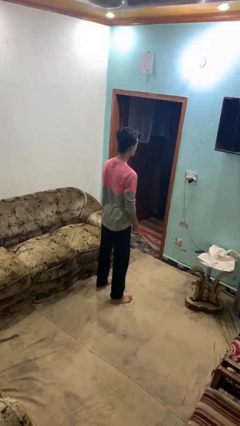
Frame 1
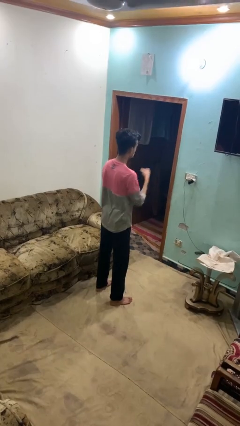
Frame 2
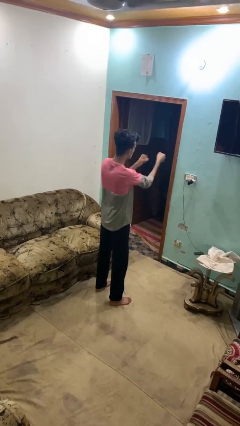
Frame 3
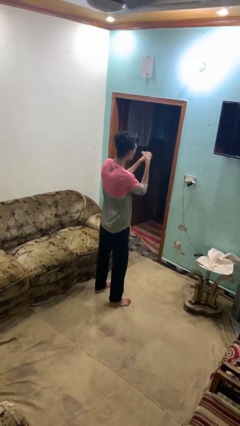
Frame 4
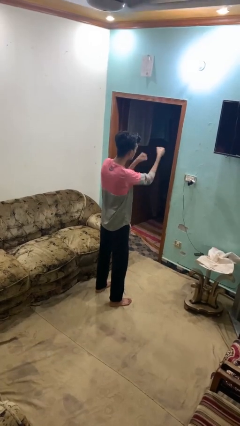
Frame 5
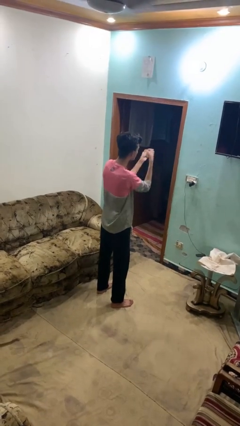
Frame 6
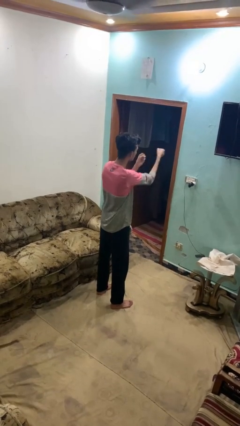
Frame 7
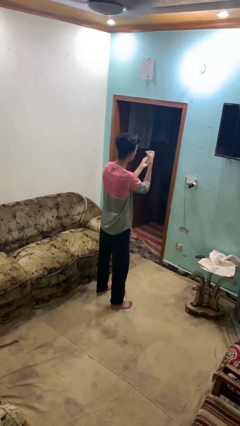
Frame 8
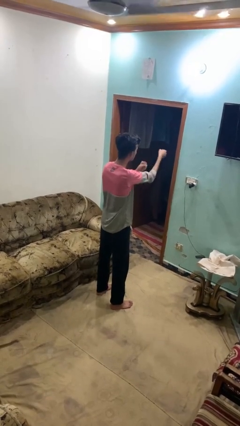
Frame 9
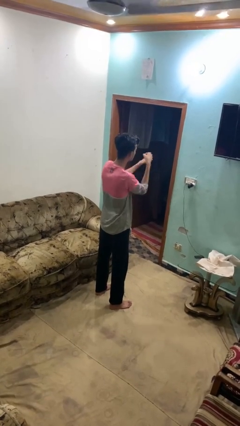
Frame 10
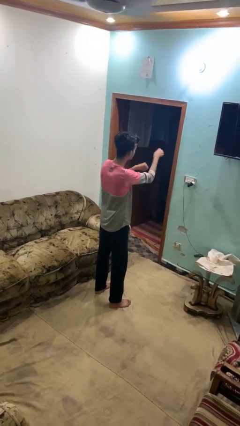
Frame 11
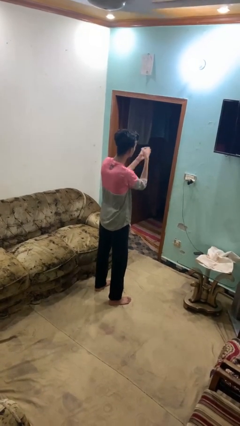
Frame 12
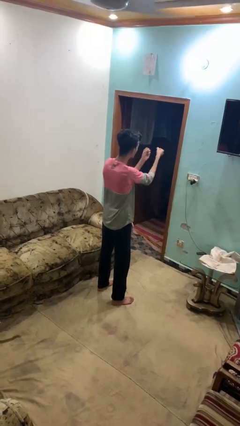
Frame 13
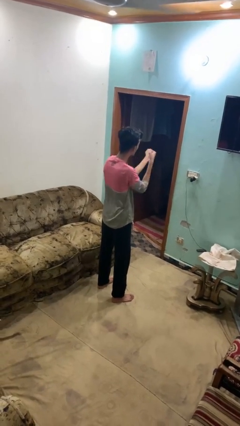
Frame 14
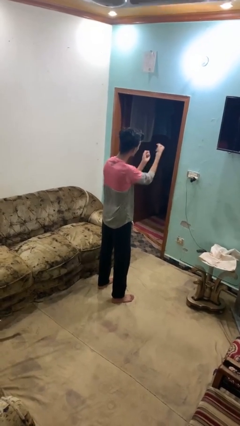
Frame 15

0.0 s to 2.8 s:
person punches

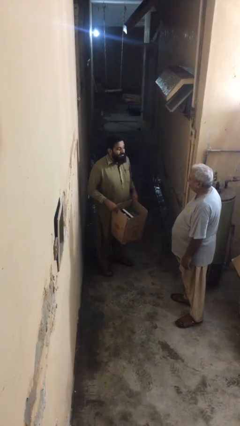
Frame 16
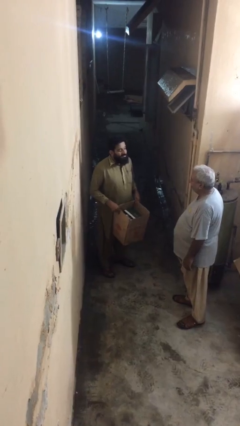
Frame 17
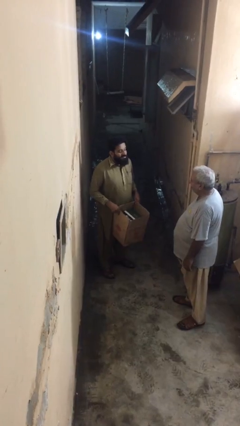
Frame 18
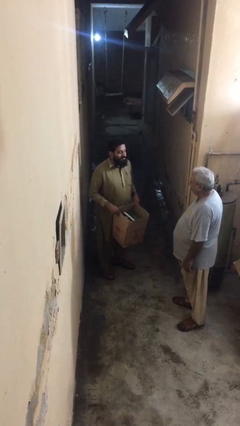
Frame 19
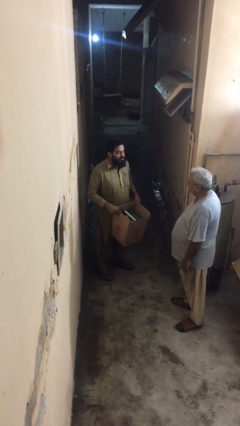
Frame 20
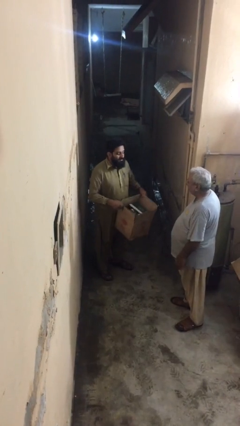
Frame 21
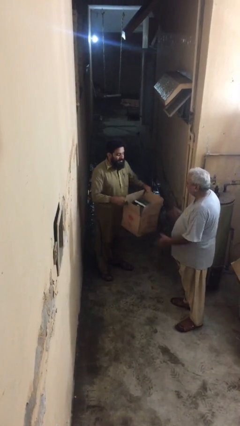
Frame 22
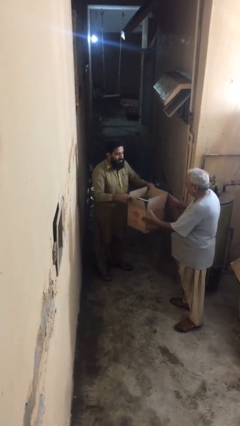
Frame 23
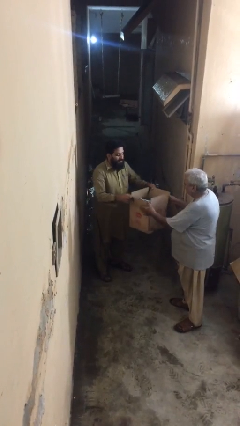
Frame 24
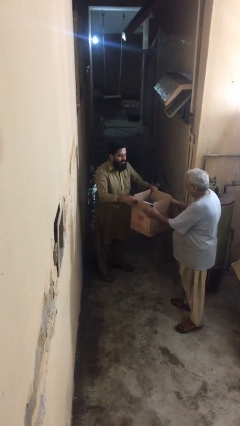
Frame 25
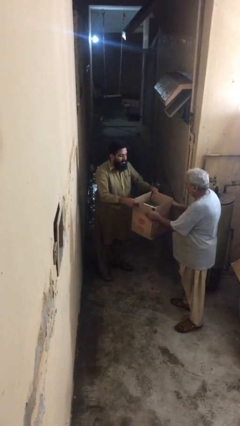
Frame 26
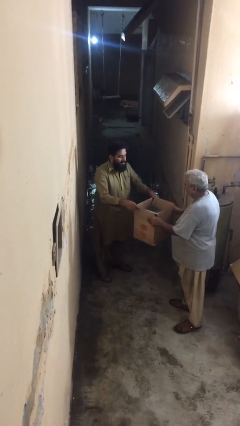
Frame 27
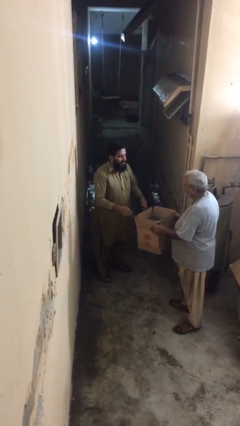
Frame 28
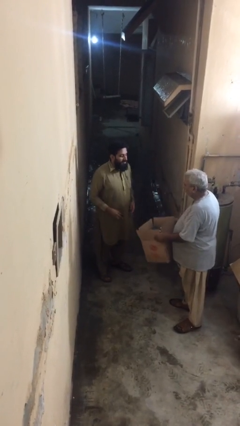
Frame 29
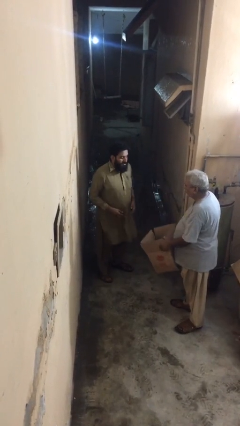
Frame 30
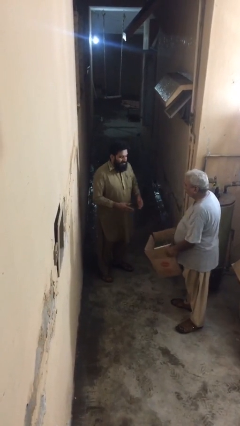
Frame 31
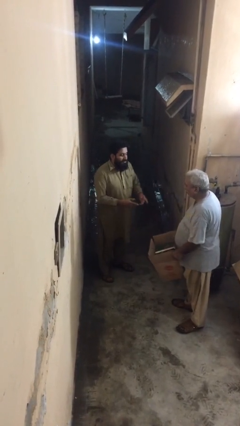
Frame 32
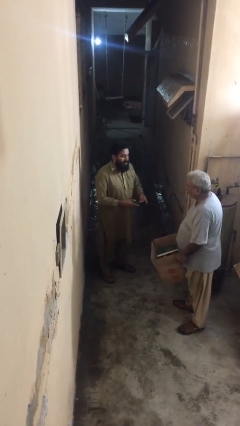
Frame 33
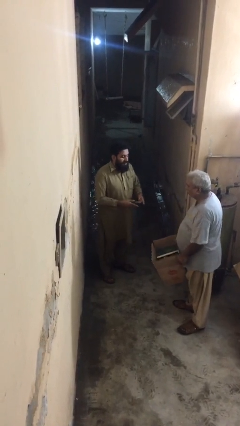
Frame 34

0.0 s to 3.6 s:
person transfers object to person

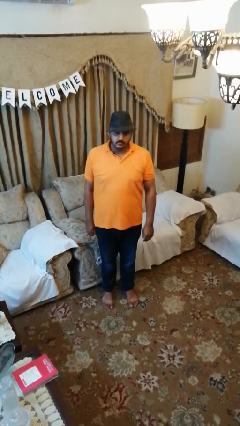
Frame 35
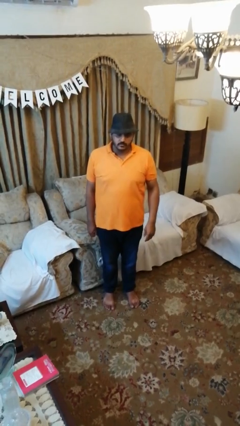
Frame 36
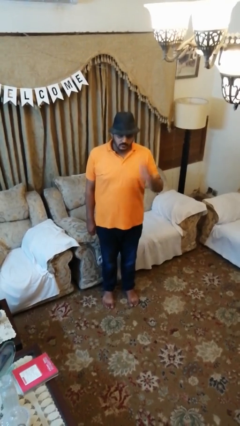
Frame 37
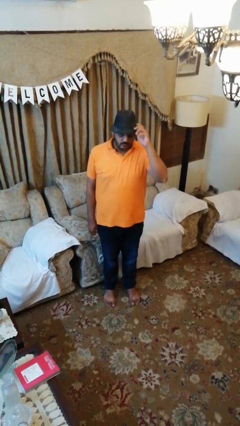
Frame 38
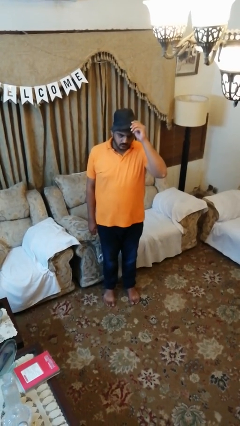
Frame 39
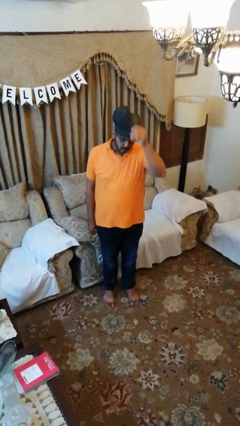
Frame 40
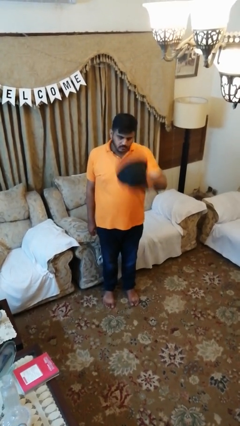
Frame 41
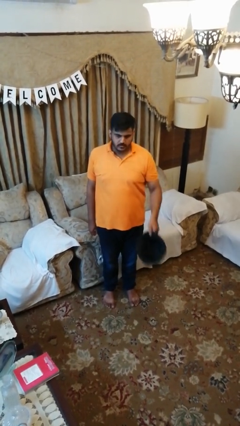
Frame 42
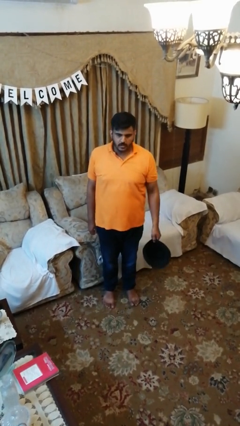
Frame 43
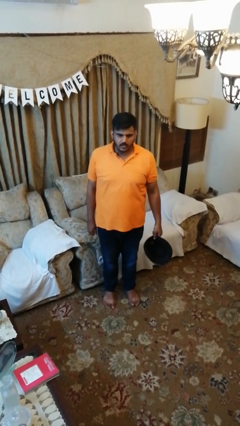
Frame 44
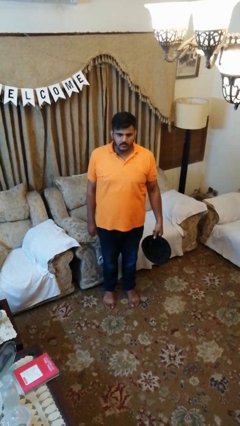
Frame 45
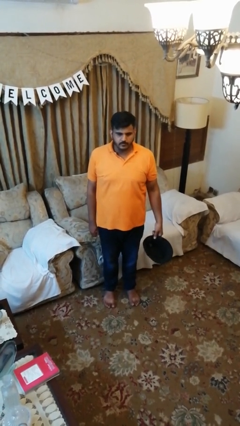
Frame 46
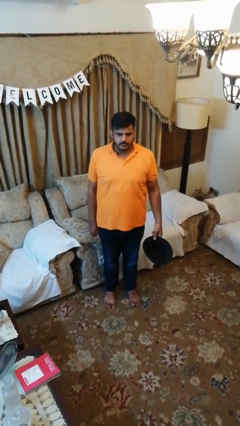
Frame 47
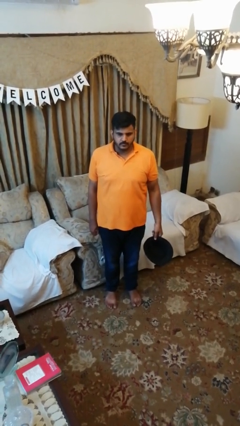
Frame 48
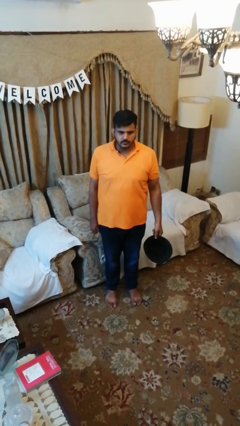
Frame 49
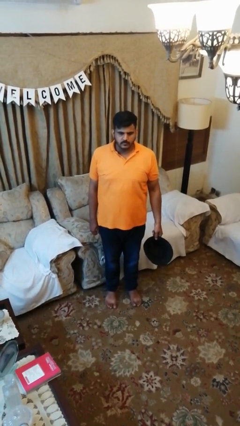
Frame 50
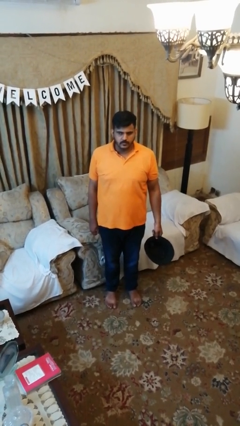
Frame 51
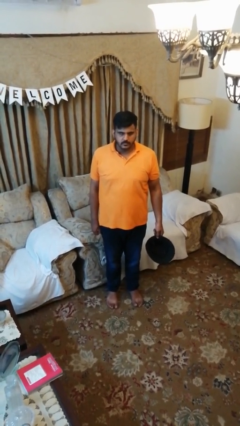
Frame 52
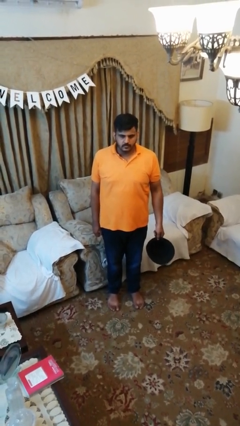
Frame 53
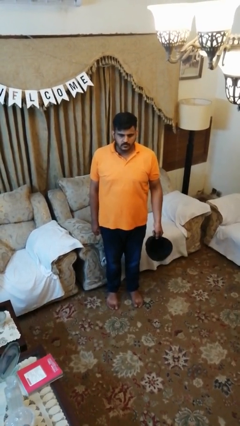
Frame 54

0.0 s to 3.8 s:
person takes off hat

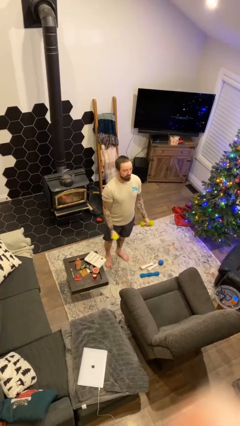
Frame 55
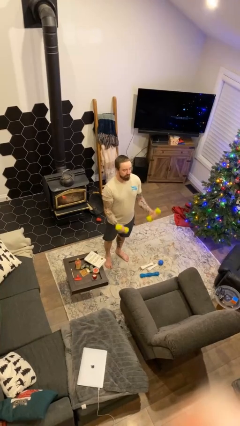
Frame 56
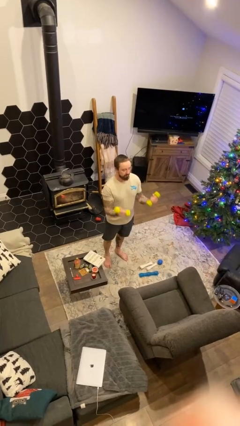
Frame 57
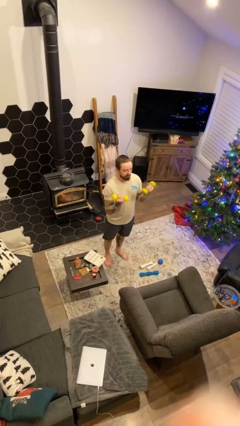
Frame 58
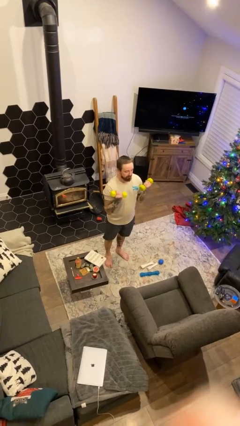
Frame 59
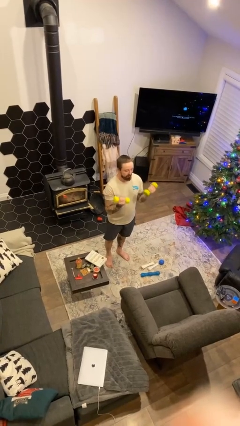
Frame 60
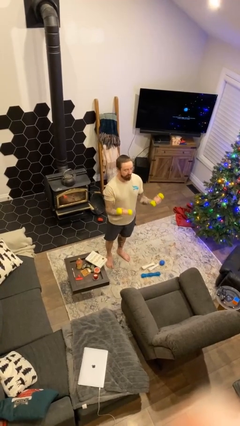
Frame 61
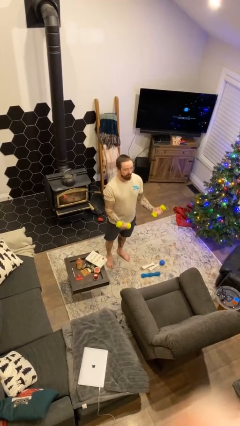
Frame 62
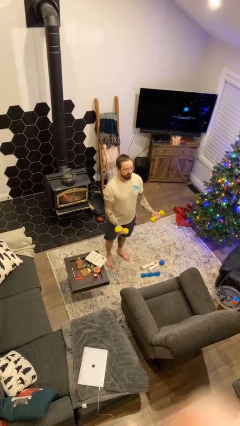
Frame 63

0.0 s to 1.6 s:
person lifts dumbbells

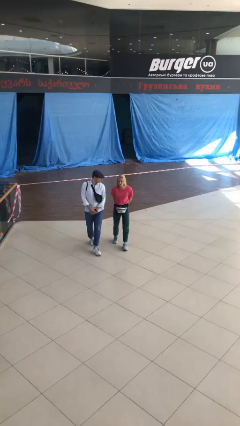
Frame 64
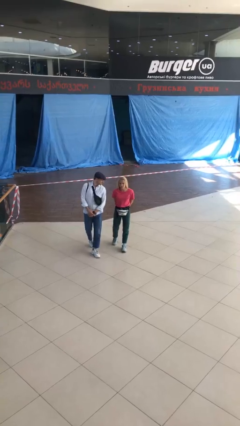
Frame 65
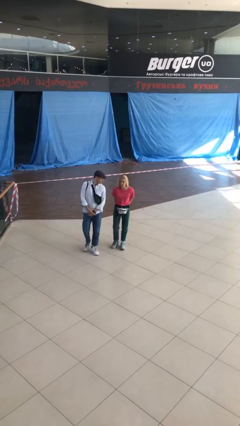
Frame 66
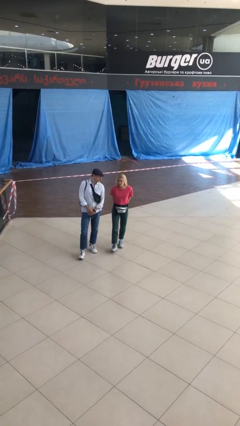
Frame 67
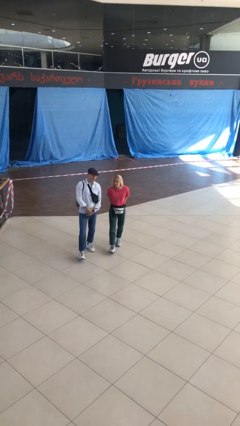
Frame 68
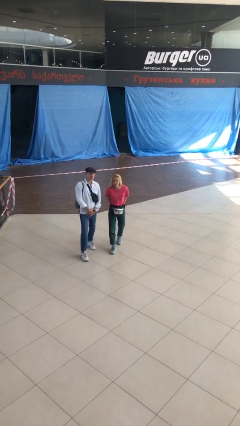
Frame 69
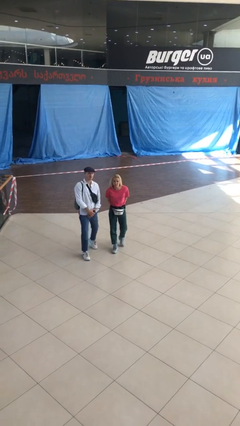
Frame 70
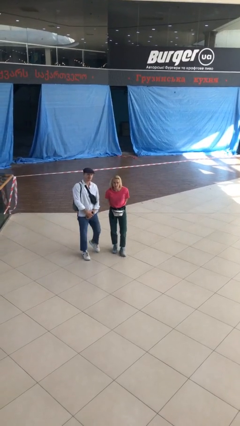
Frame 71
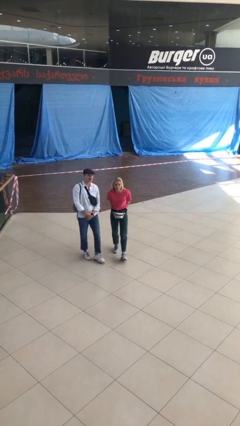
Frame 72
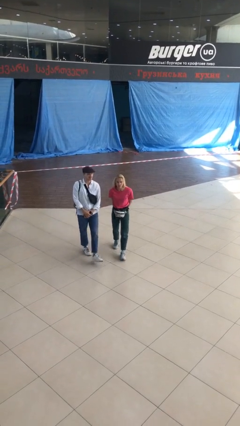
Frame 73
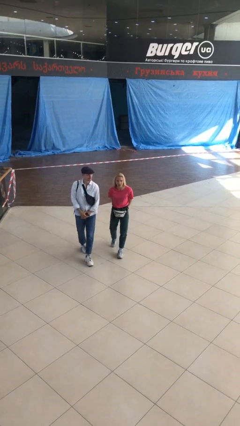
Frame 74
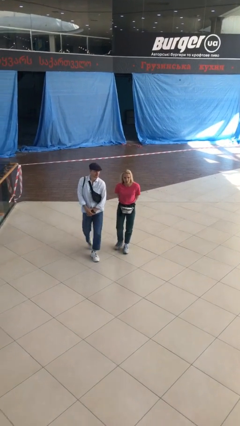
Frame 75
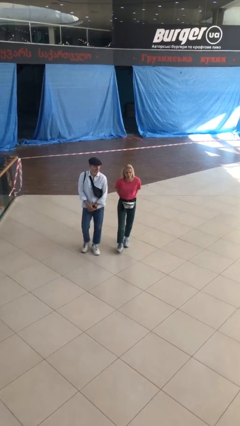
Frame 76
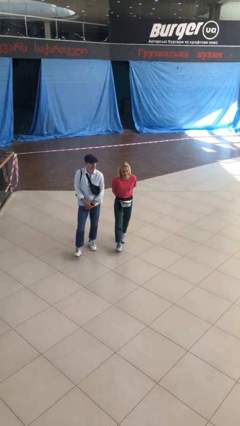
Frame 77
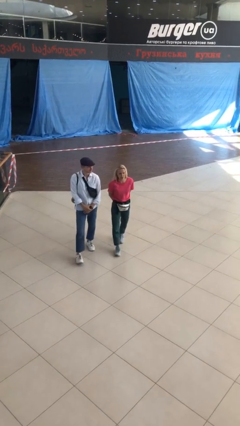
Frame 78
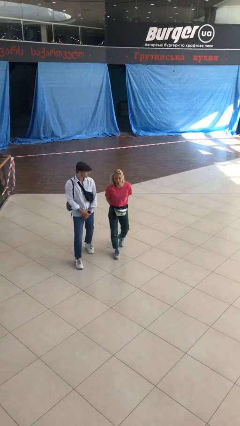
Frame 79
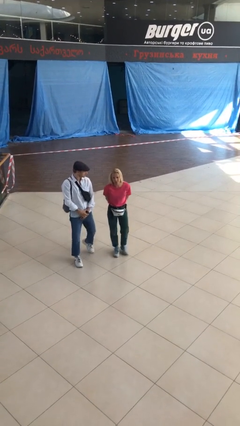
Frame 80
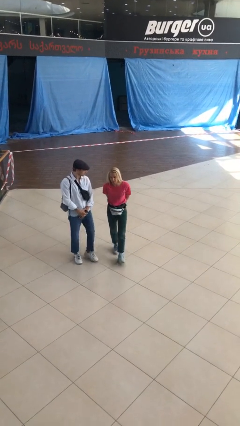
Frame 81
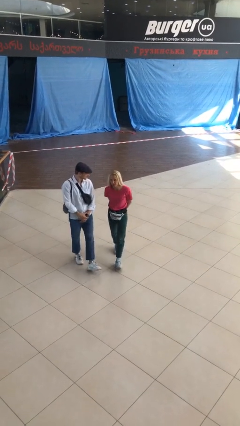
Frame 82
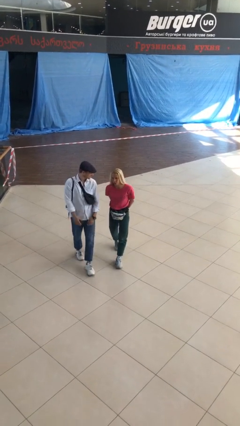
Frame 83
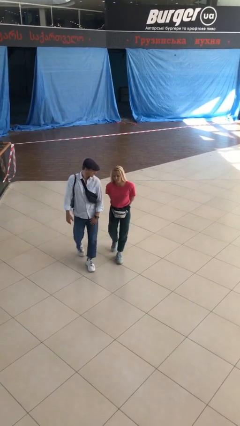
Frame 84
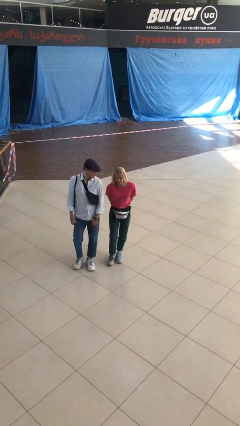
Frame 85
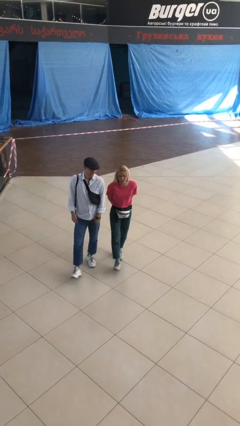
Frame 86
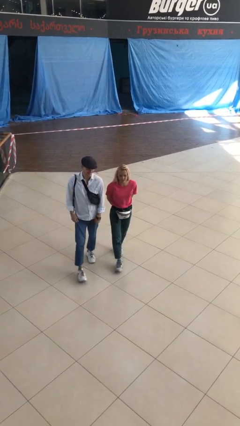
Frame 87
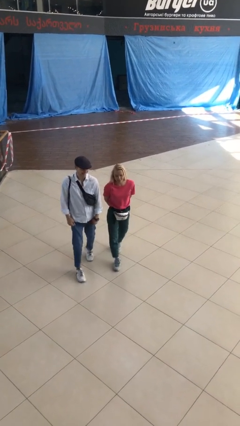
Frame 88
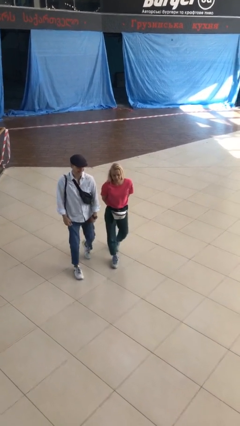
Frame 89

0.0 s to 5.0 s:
person talks to person

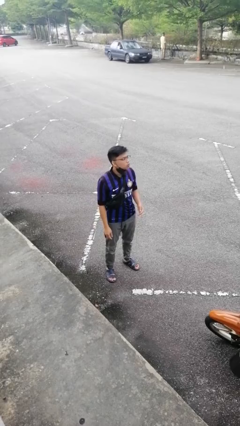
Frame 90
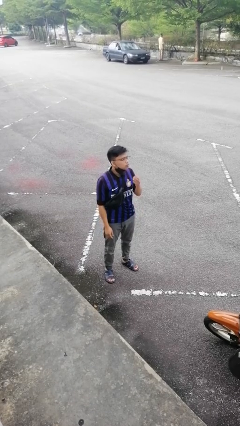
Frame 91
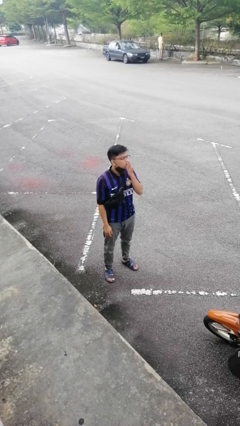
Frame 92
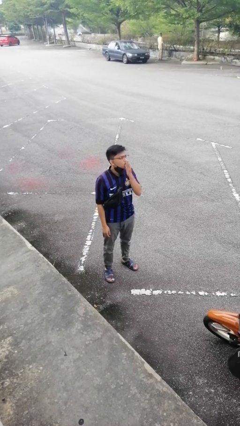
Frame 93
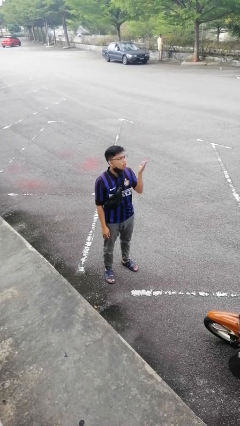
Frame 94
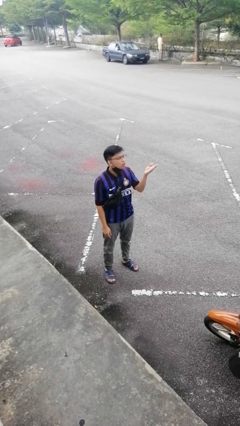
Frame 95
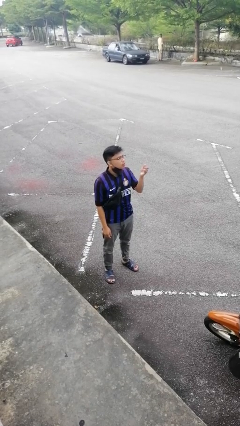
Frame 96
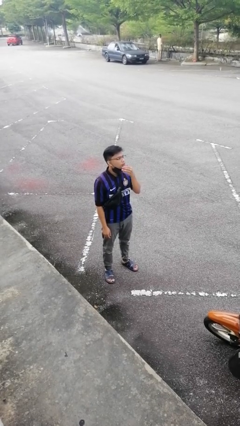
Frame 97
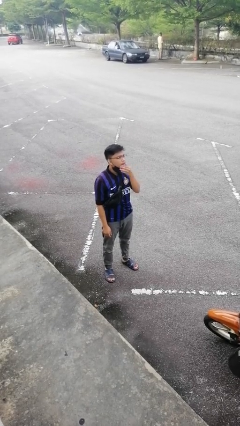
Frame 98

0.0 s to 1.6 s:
person gestures blow kiss
